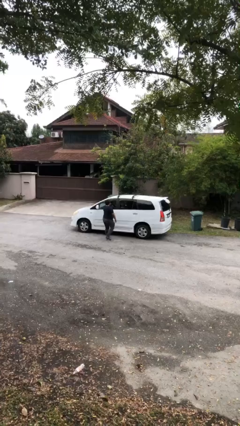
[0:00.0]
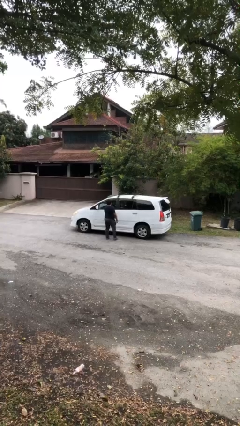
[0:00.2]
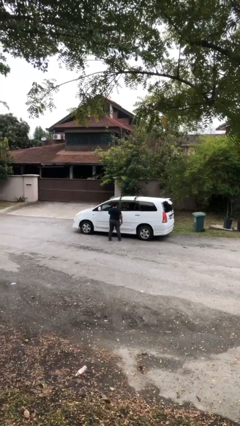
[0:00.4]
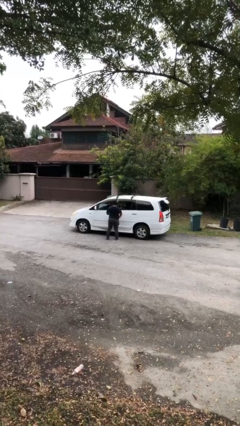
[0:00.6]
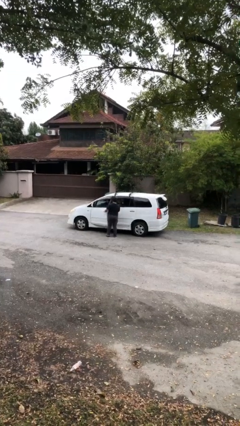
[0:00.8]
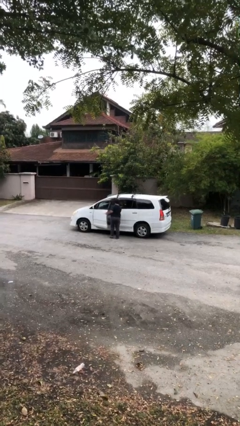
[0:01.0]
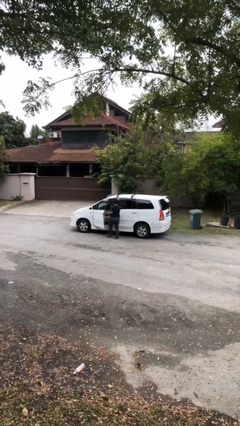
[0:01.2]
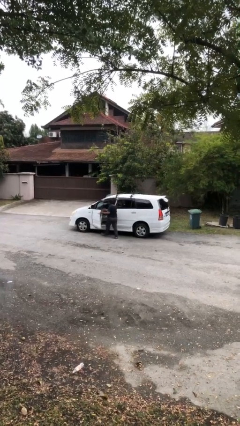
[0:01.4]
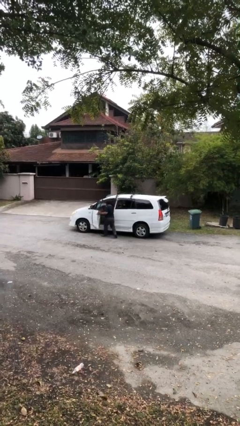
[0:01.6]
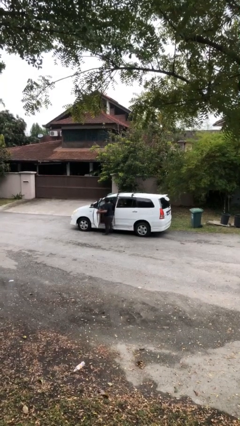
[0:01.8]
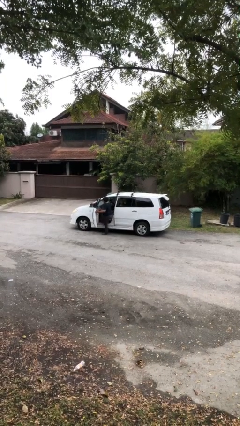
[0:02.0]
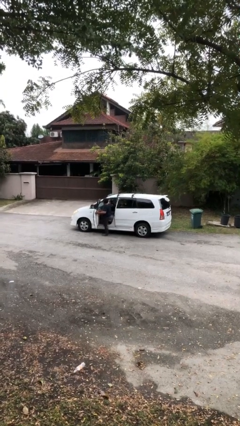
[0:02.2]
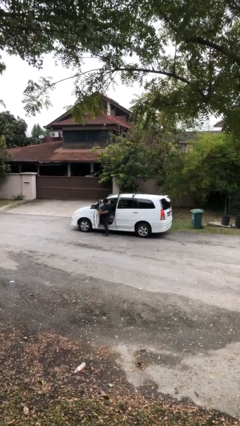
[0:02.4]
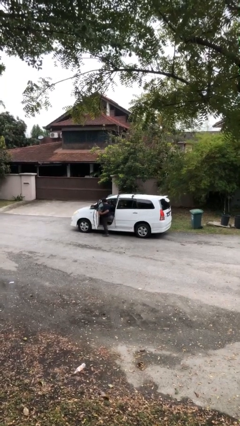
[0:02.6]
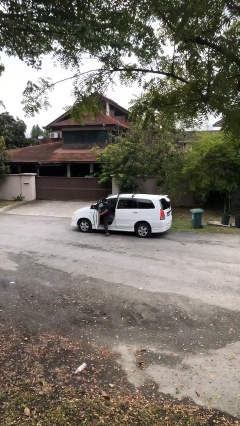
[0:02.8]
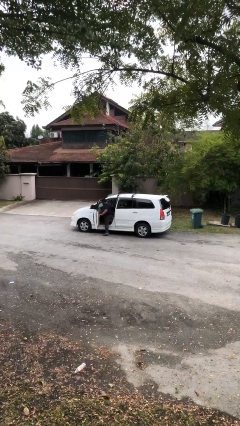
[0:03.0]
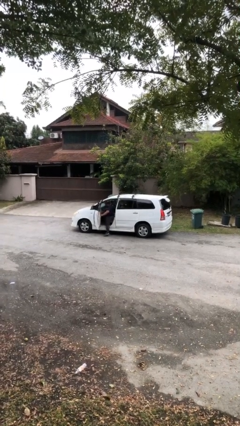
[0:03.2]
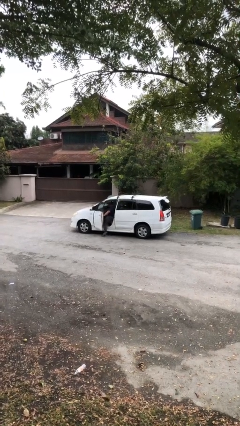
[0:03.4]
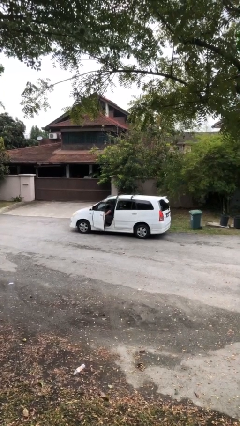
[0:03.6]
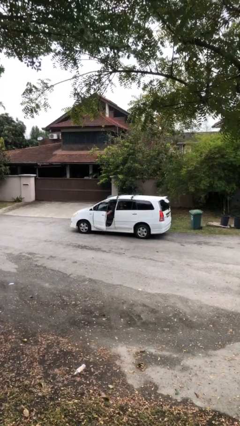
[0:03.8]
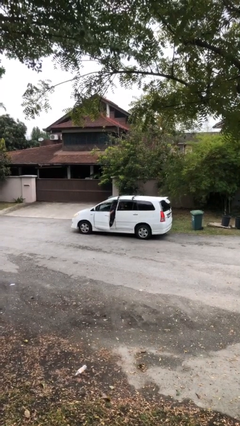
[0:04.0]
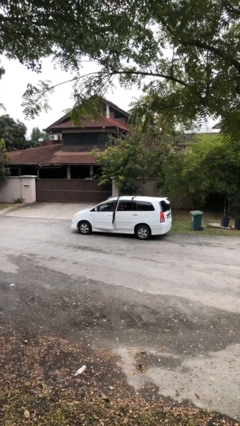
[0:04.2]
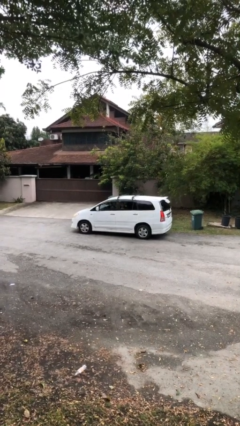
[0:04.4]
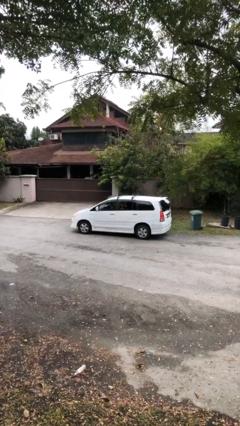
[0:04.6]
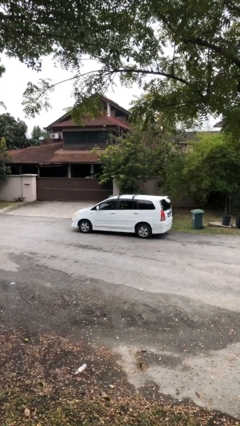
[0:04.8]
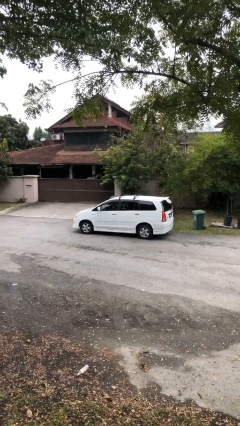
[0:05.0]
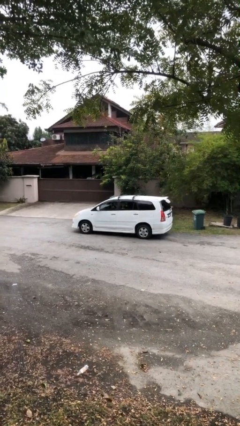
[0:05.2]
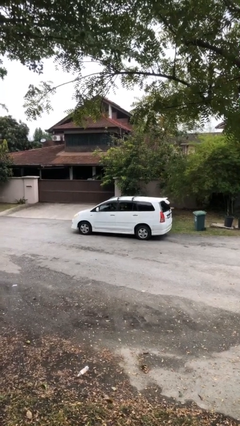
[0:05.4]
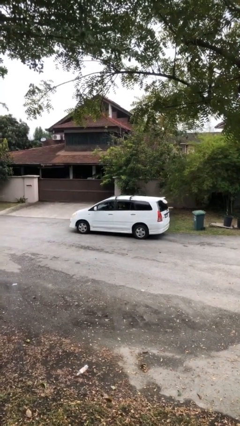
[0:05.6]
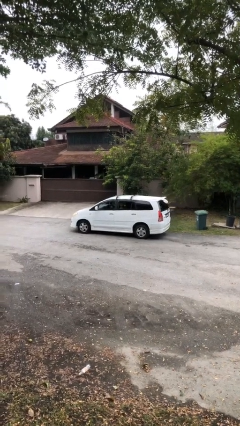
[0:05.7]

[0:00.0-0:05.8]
car picks up person

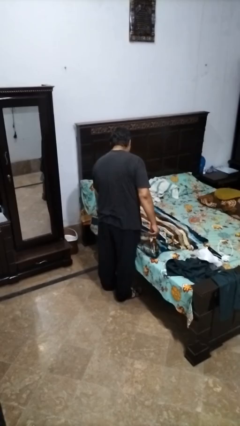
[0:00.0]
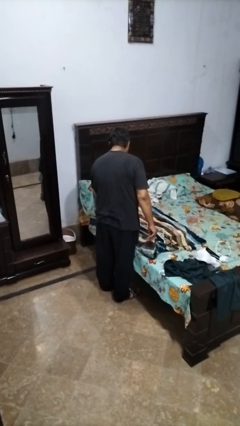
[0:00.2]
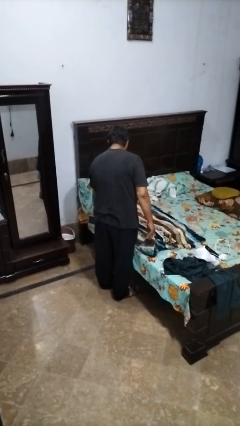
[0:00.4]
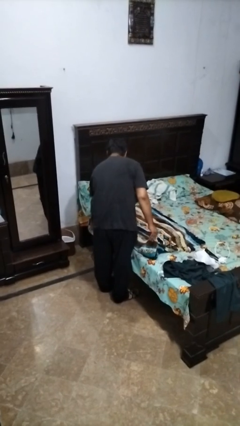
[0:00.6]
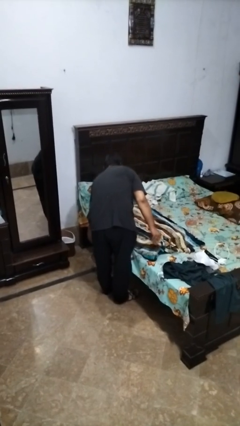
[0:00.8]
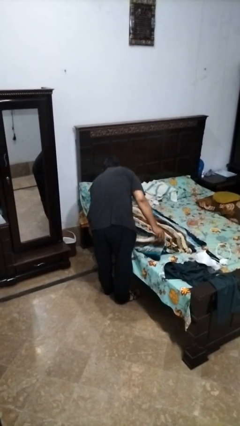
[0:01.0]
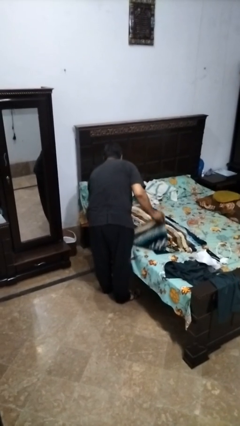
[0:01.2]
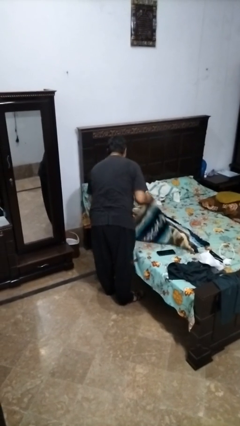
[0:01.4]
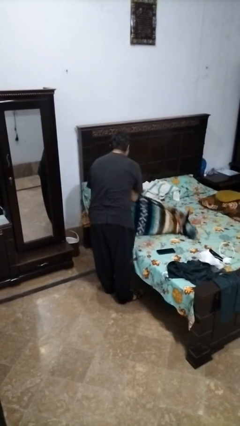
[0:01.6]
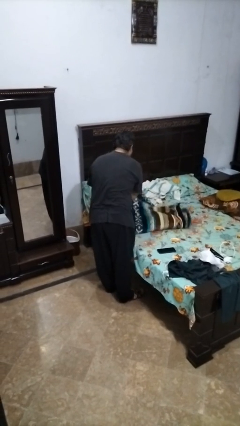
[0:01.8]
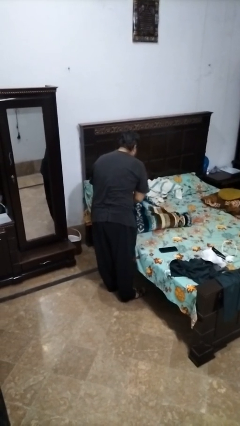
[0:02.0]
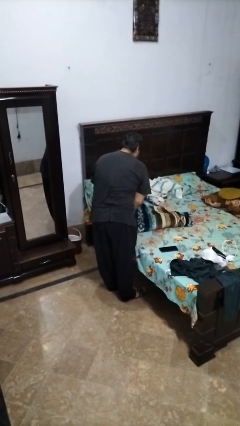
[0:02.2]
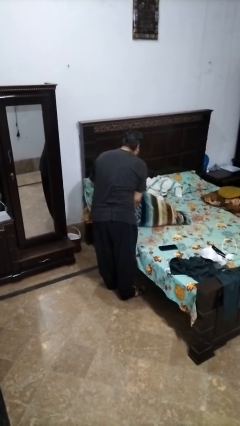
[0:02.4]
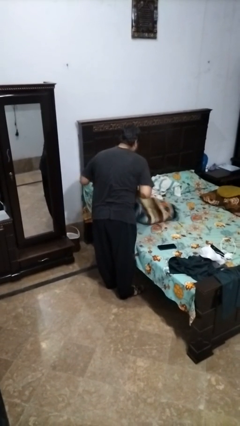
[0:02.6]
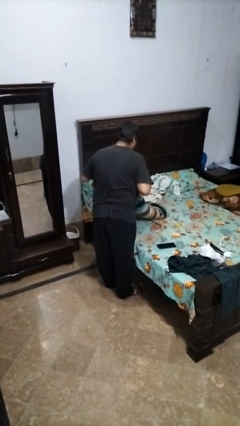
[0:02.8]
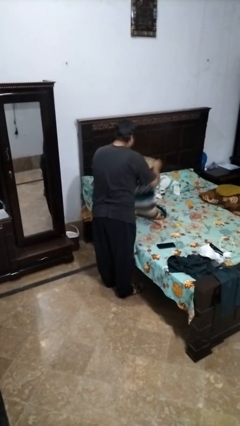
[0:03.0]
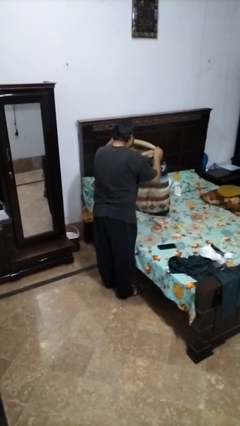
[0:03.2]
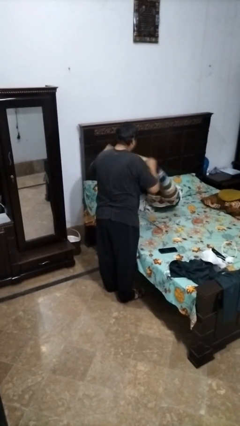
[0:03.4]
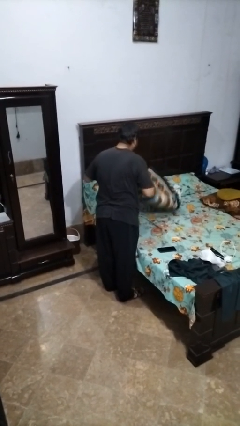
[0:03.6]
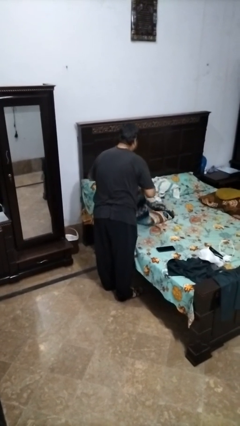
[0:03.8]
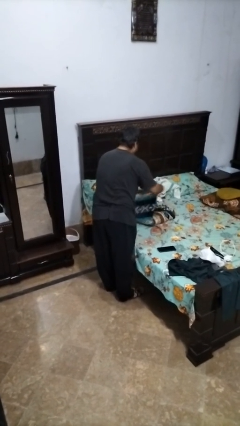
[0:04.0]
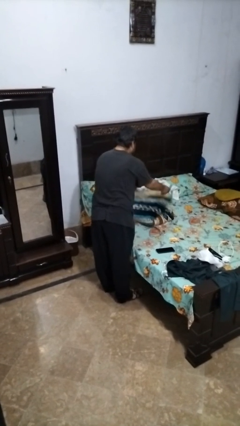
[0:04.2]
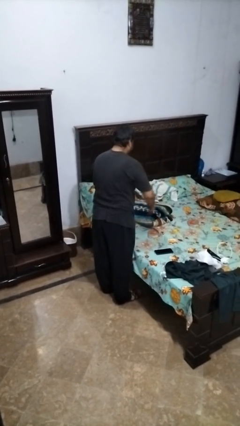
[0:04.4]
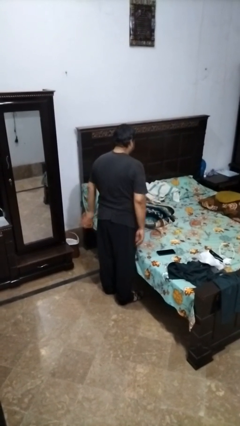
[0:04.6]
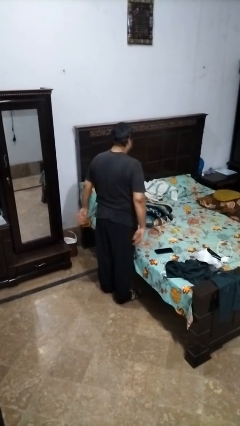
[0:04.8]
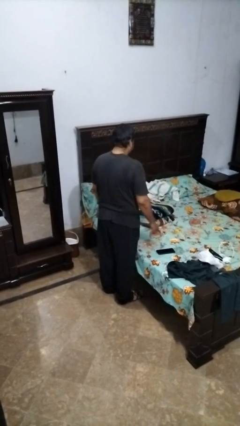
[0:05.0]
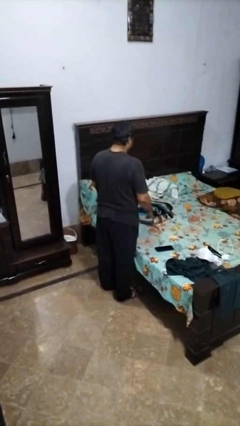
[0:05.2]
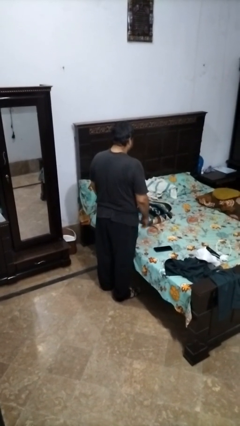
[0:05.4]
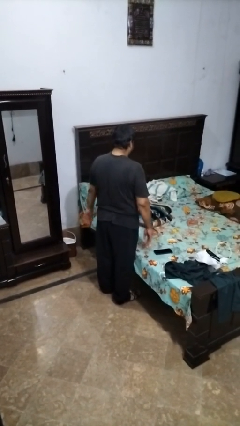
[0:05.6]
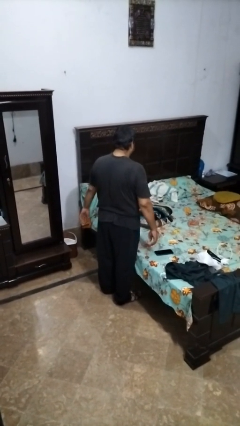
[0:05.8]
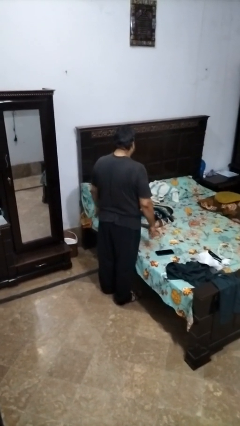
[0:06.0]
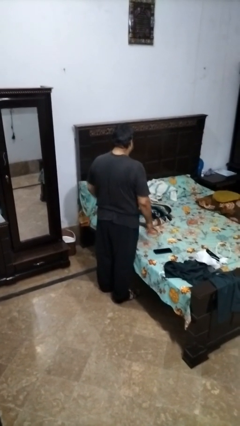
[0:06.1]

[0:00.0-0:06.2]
person folds blanket

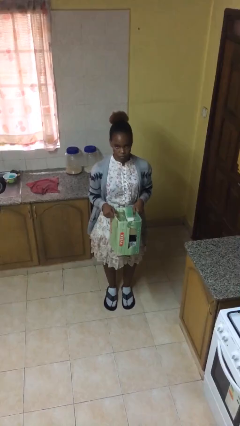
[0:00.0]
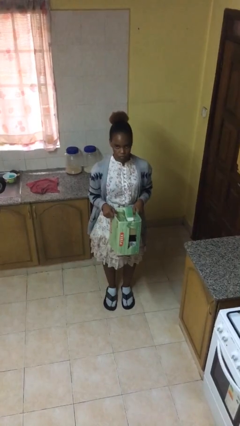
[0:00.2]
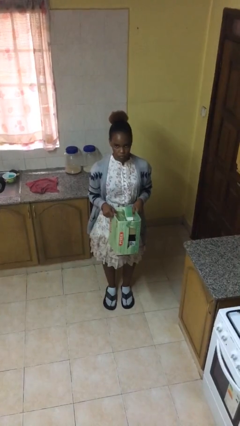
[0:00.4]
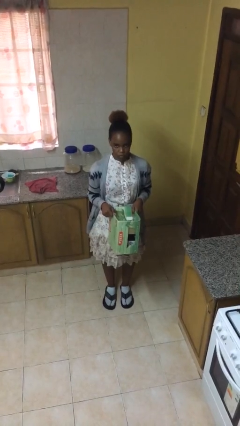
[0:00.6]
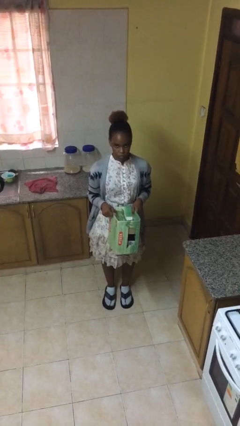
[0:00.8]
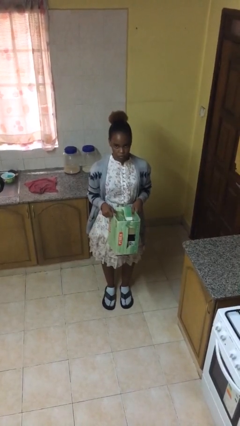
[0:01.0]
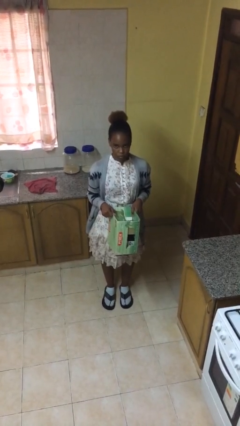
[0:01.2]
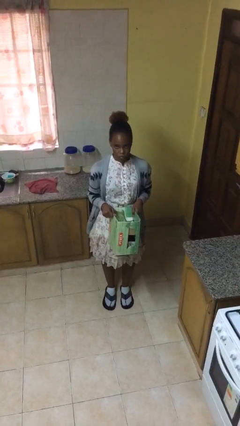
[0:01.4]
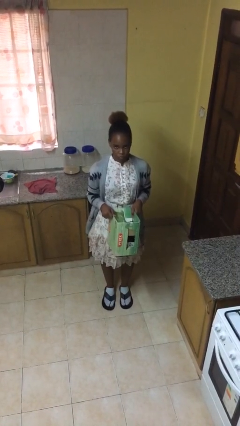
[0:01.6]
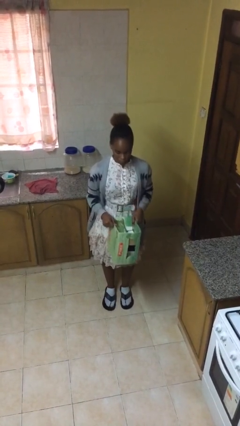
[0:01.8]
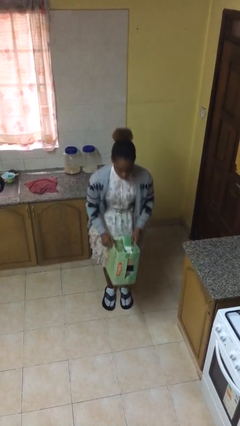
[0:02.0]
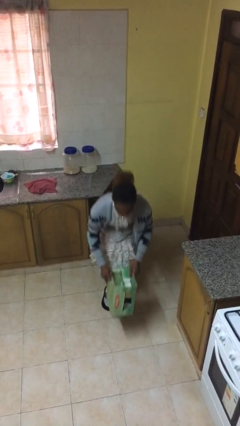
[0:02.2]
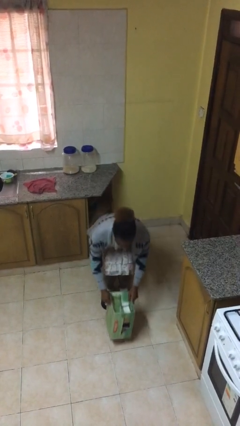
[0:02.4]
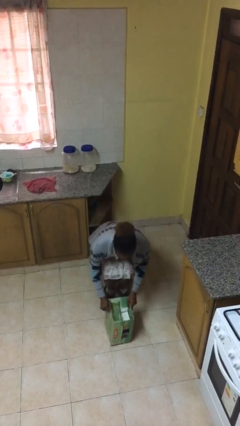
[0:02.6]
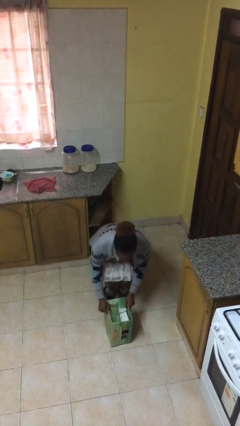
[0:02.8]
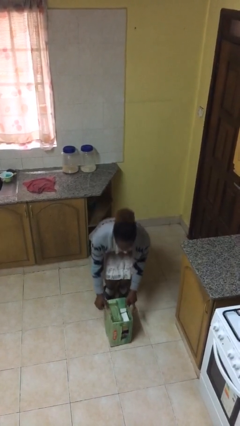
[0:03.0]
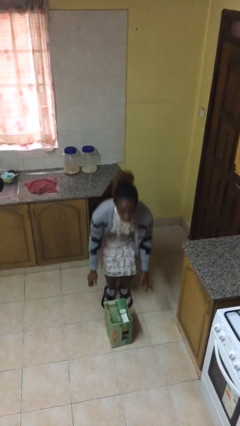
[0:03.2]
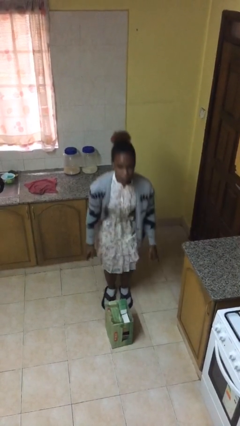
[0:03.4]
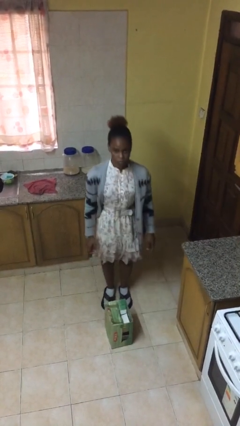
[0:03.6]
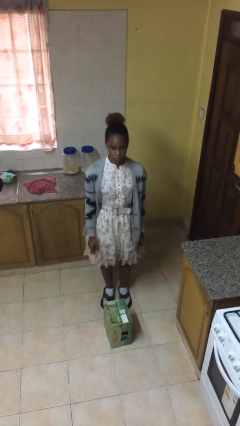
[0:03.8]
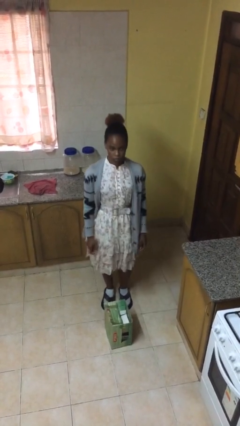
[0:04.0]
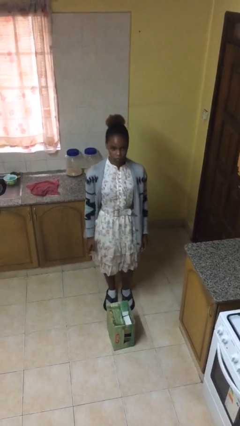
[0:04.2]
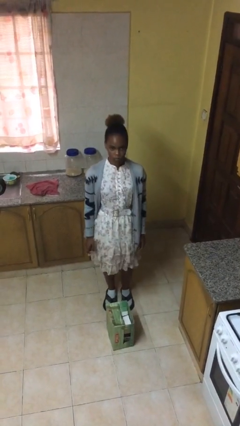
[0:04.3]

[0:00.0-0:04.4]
person puts down object on floor

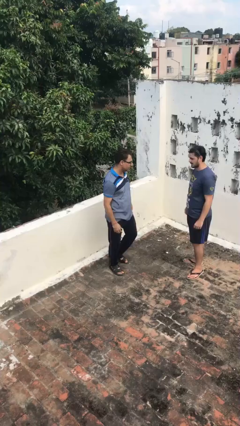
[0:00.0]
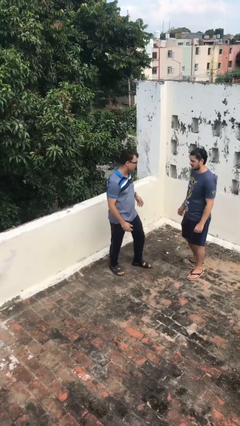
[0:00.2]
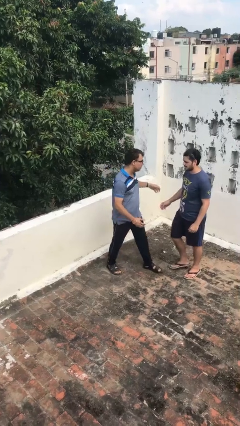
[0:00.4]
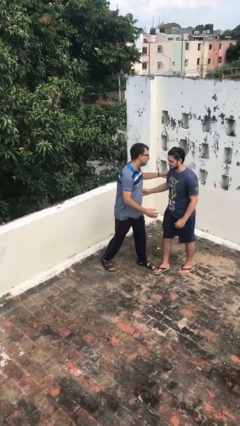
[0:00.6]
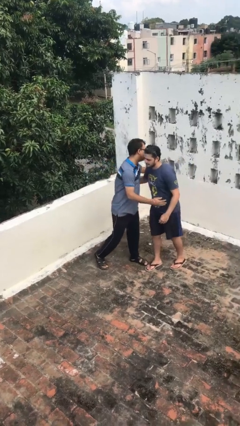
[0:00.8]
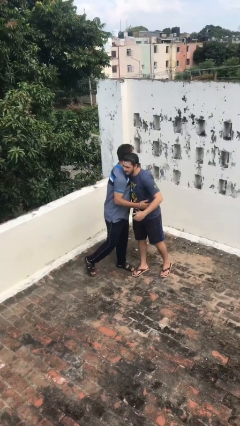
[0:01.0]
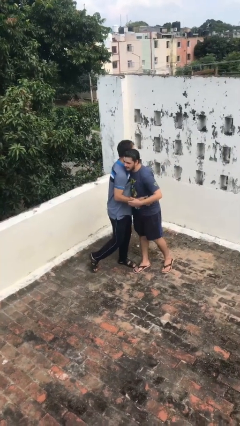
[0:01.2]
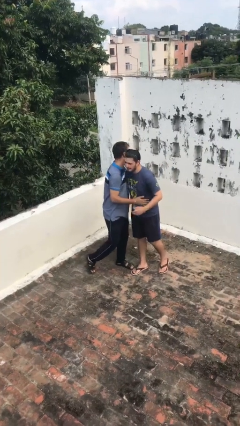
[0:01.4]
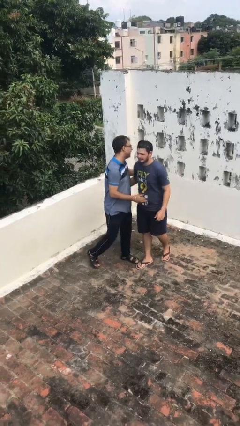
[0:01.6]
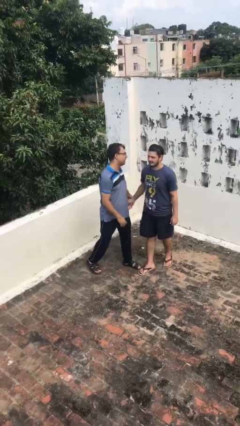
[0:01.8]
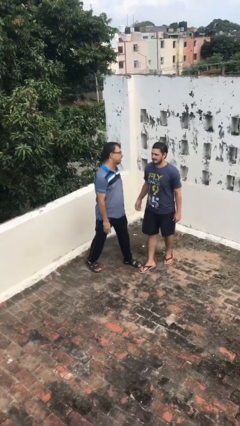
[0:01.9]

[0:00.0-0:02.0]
person embraces person
